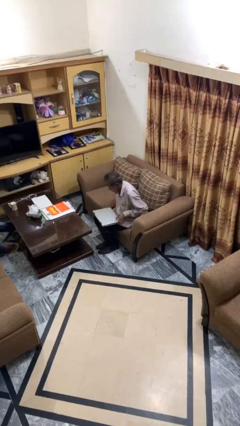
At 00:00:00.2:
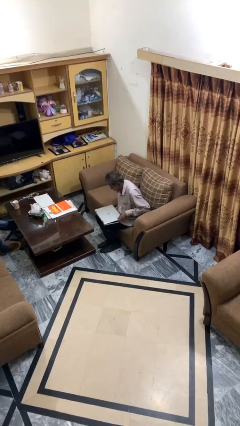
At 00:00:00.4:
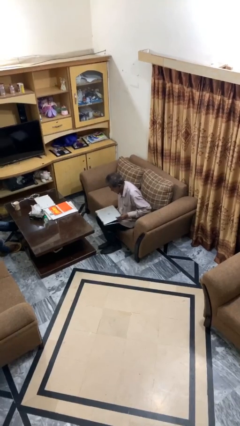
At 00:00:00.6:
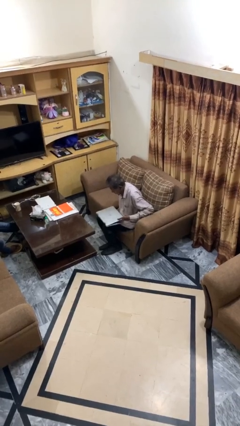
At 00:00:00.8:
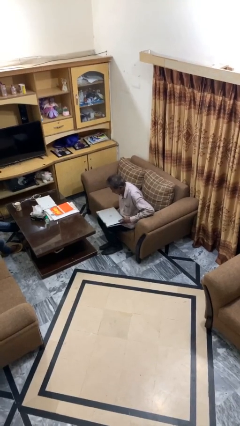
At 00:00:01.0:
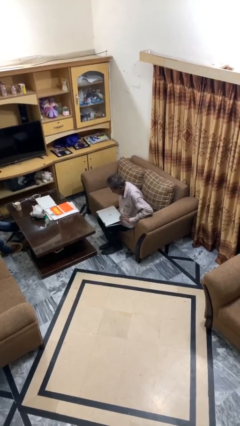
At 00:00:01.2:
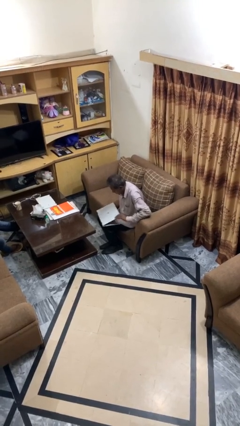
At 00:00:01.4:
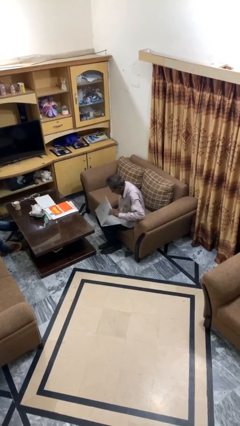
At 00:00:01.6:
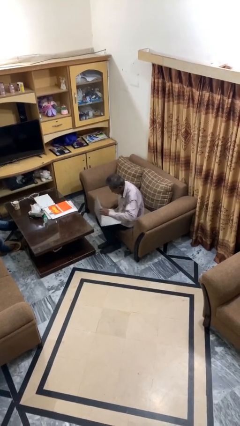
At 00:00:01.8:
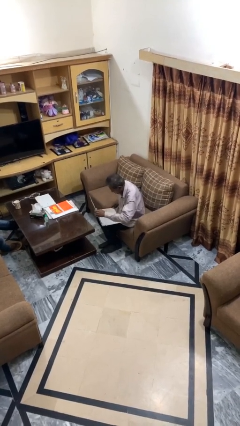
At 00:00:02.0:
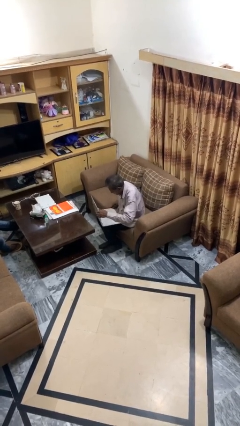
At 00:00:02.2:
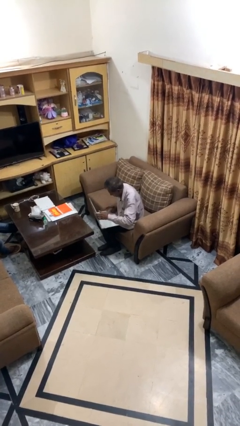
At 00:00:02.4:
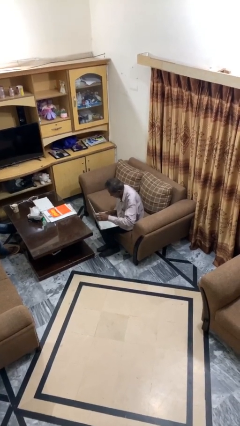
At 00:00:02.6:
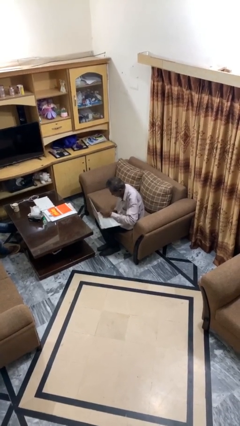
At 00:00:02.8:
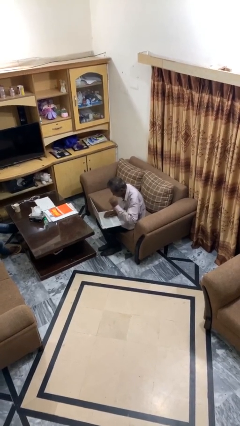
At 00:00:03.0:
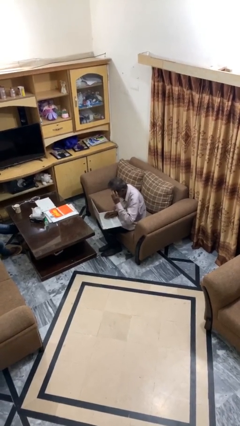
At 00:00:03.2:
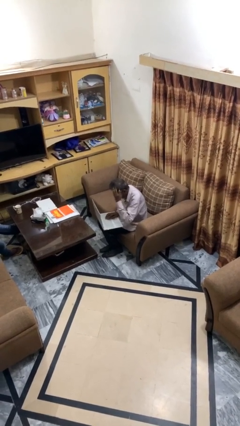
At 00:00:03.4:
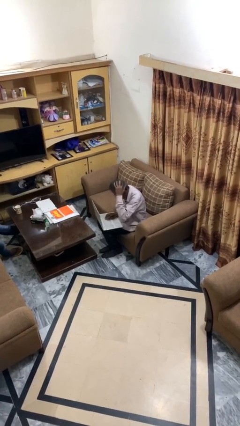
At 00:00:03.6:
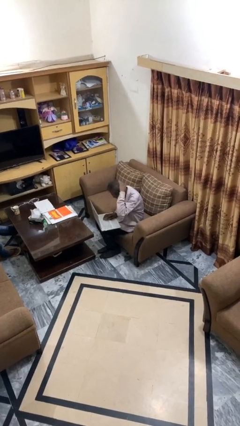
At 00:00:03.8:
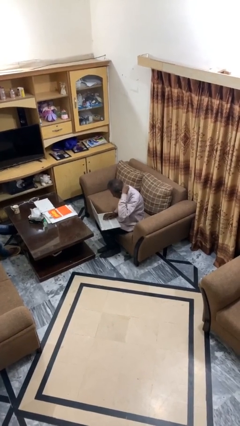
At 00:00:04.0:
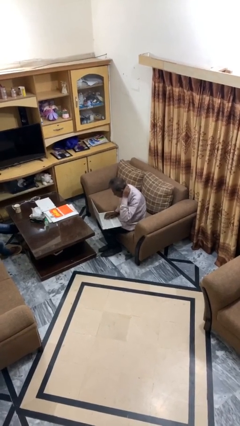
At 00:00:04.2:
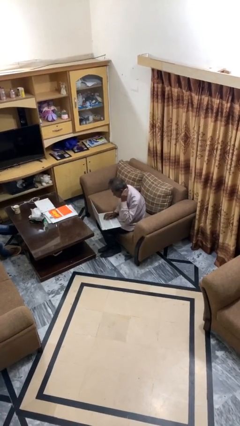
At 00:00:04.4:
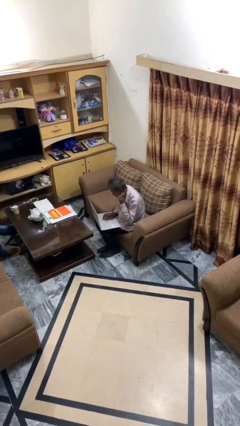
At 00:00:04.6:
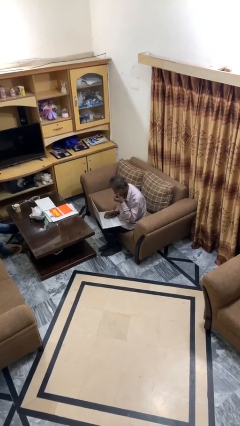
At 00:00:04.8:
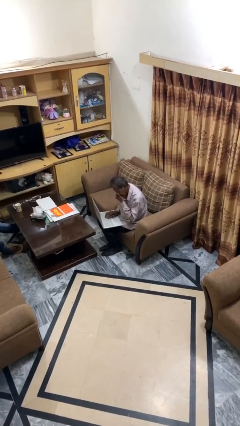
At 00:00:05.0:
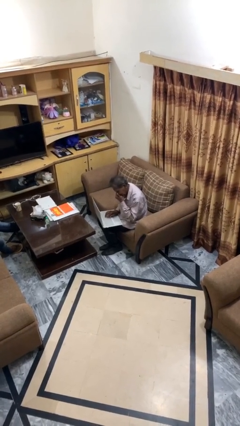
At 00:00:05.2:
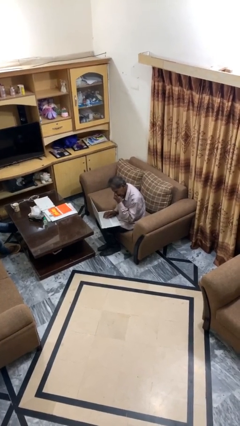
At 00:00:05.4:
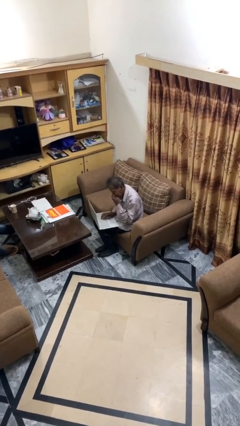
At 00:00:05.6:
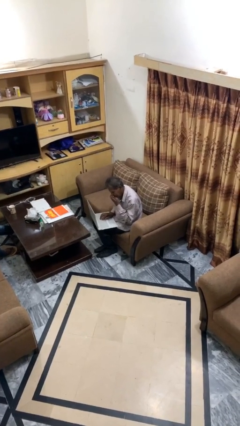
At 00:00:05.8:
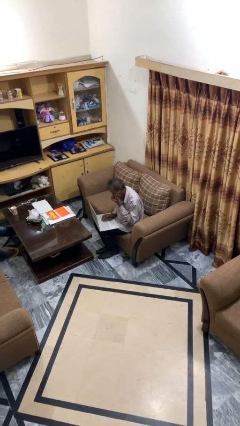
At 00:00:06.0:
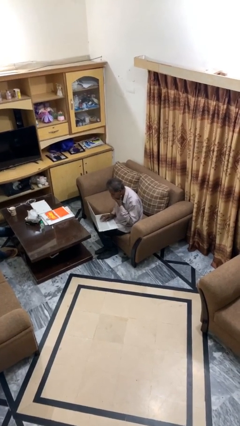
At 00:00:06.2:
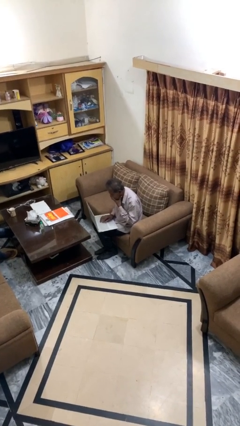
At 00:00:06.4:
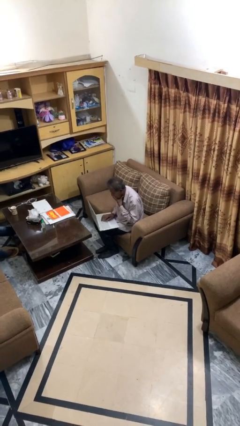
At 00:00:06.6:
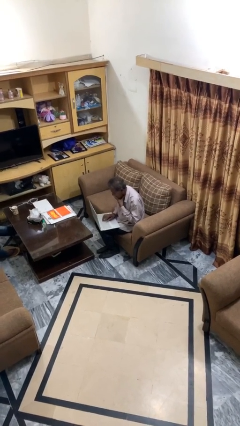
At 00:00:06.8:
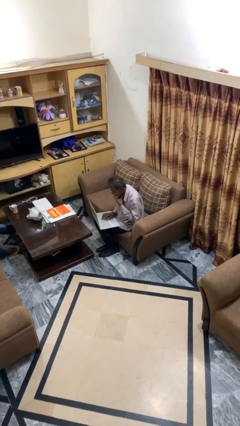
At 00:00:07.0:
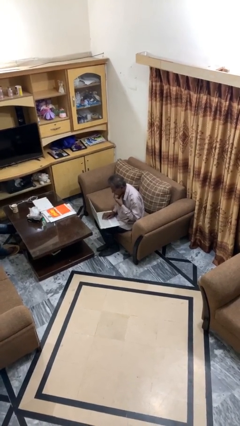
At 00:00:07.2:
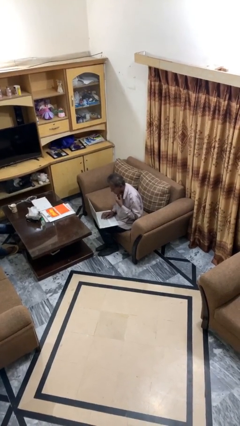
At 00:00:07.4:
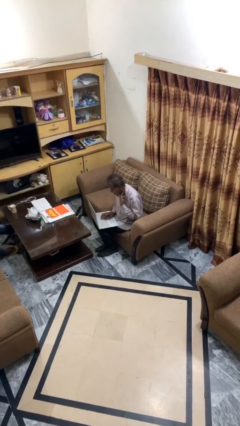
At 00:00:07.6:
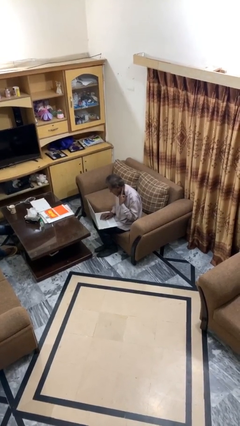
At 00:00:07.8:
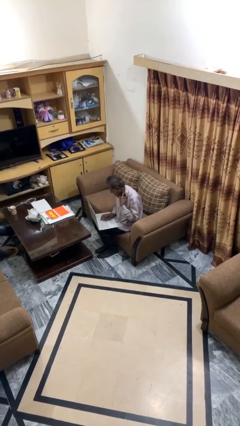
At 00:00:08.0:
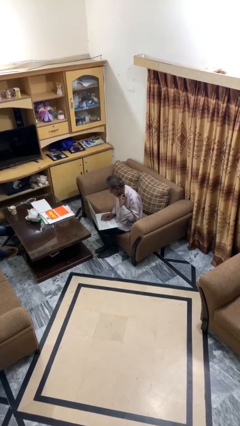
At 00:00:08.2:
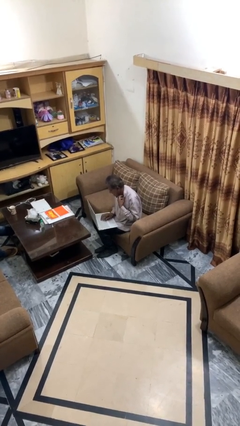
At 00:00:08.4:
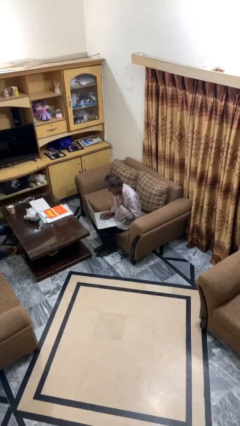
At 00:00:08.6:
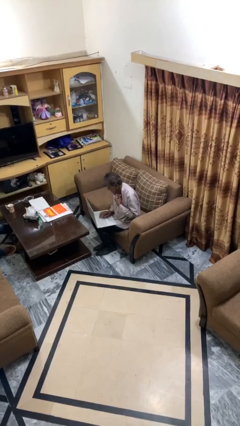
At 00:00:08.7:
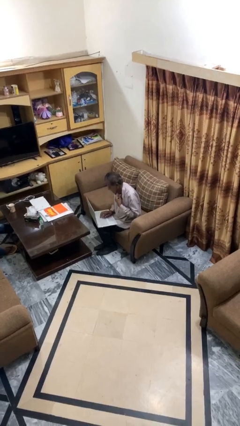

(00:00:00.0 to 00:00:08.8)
person interacts with laptop

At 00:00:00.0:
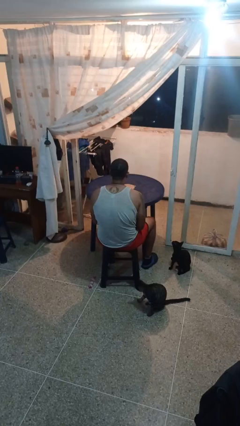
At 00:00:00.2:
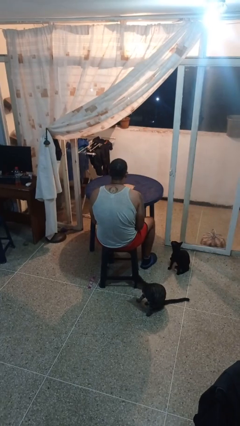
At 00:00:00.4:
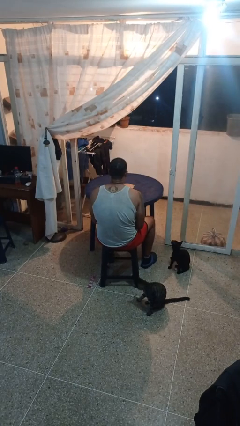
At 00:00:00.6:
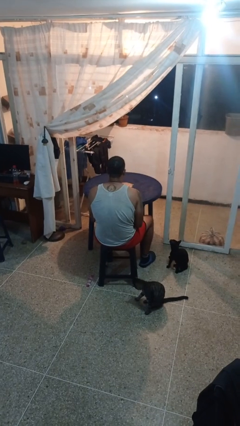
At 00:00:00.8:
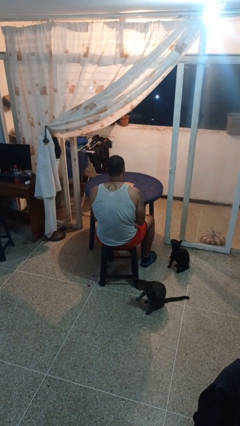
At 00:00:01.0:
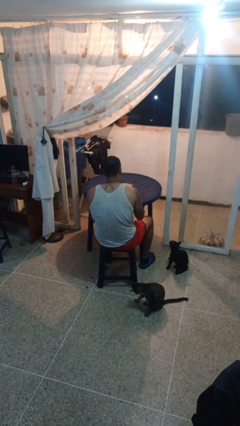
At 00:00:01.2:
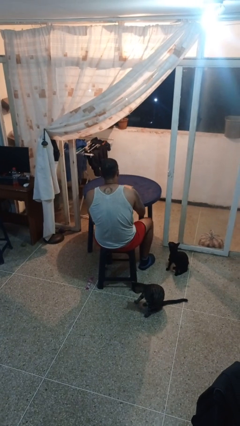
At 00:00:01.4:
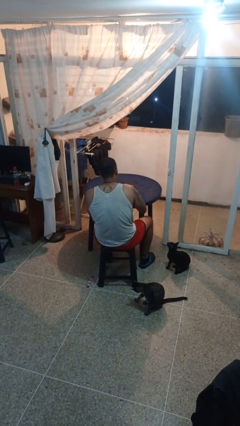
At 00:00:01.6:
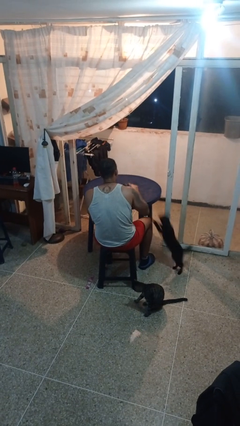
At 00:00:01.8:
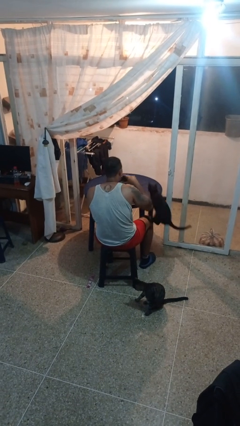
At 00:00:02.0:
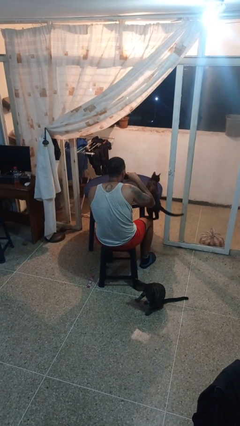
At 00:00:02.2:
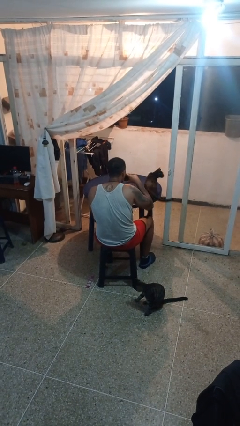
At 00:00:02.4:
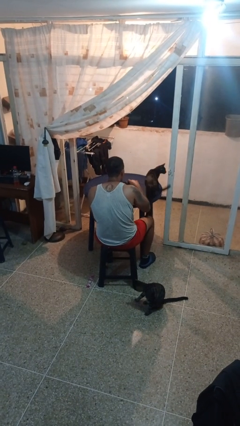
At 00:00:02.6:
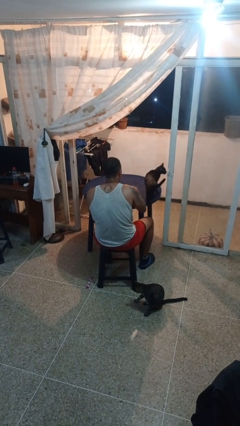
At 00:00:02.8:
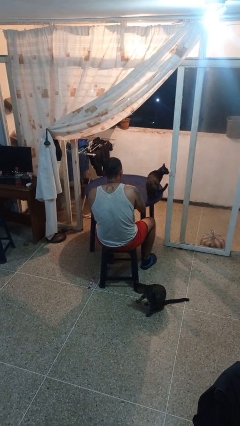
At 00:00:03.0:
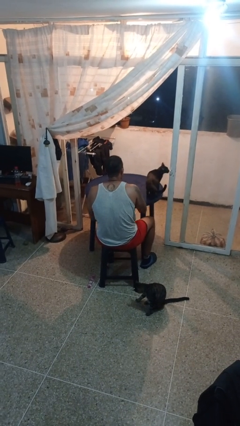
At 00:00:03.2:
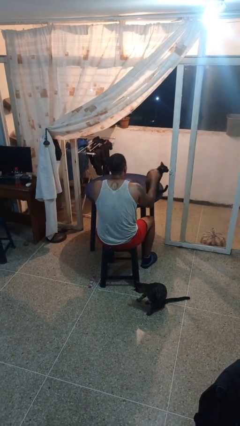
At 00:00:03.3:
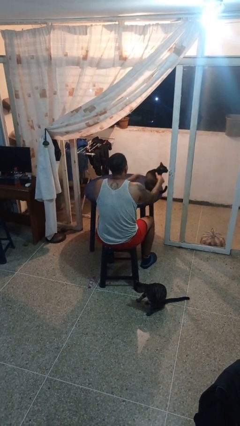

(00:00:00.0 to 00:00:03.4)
person eats with hands

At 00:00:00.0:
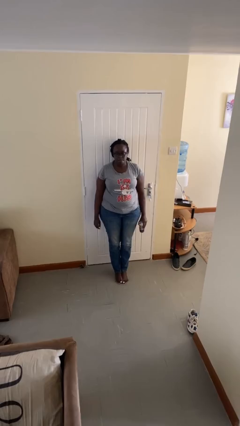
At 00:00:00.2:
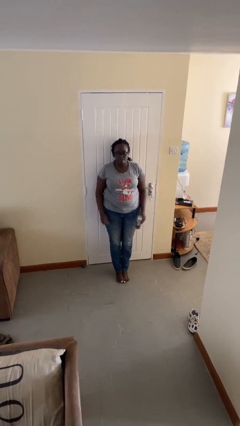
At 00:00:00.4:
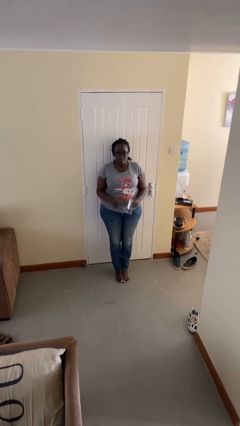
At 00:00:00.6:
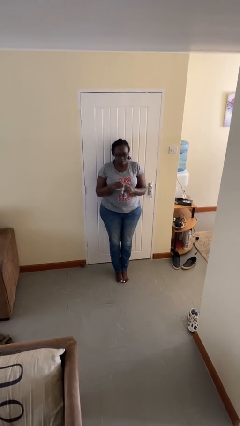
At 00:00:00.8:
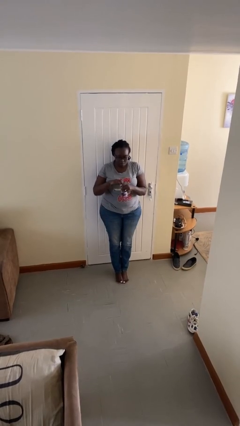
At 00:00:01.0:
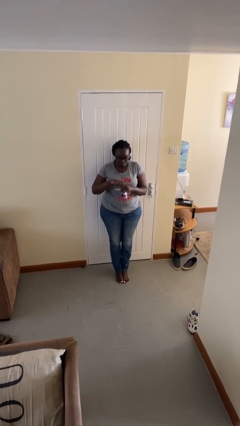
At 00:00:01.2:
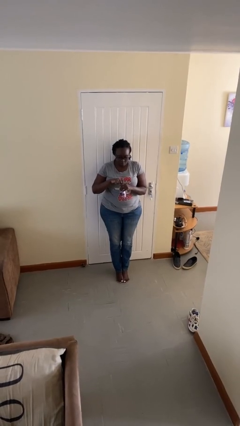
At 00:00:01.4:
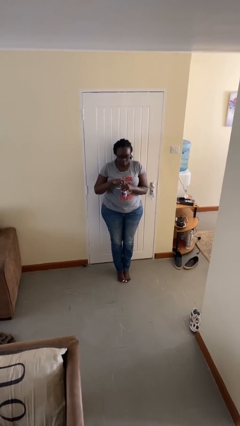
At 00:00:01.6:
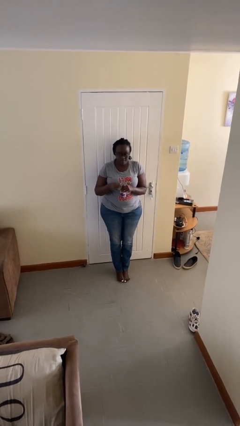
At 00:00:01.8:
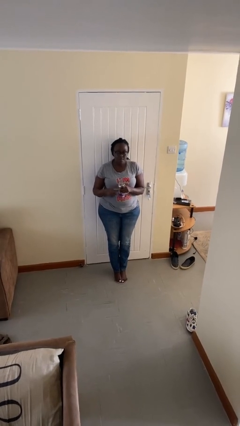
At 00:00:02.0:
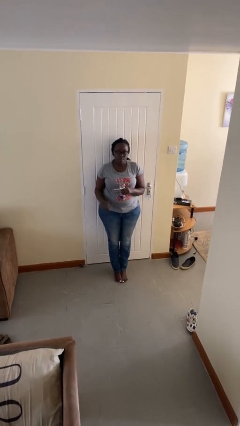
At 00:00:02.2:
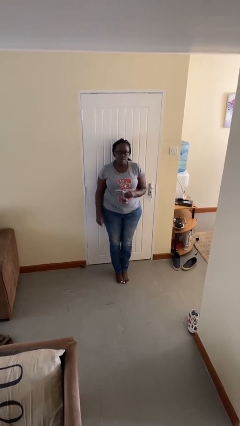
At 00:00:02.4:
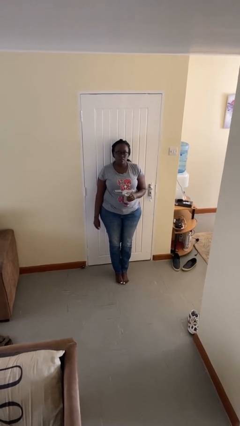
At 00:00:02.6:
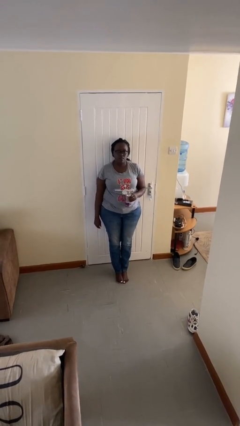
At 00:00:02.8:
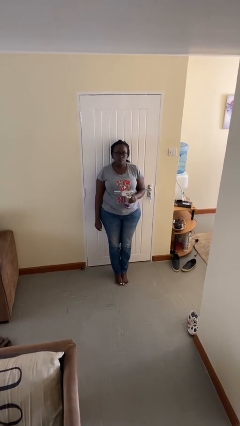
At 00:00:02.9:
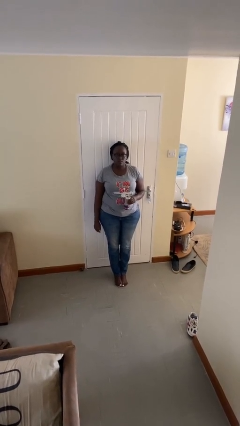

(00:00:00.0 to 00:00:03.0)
person opens beverage can

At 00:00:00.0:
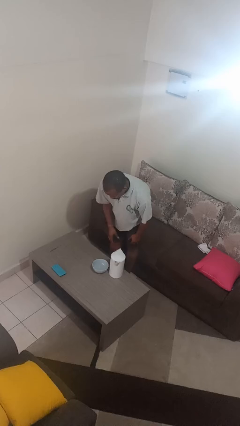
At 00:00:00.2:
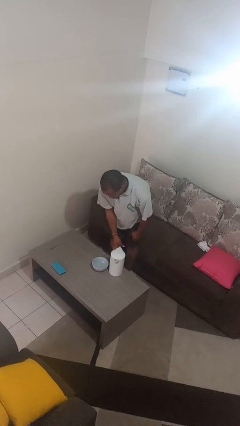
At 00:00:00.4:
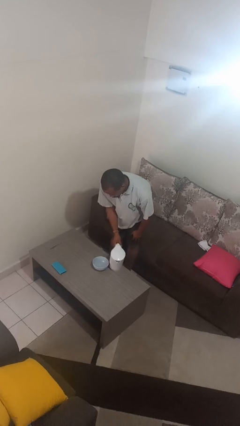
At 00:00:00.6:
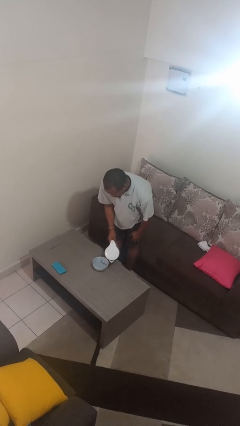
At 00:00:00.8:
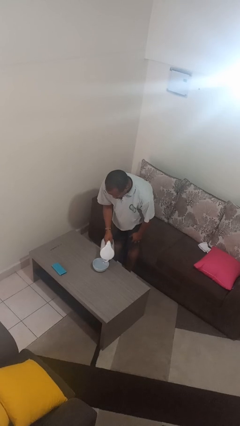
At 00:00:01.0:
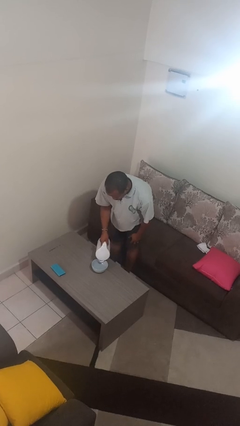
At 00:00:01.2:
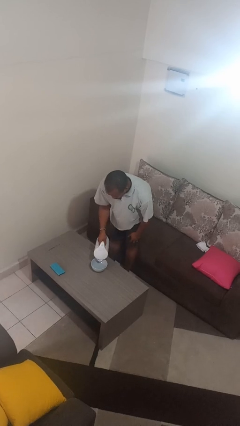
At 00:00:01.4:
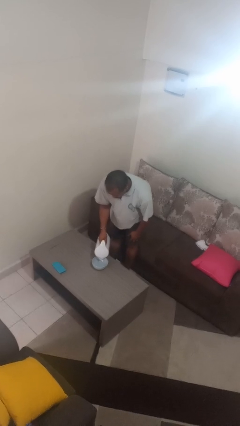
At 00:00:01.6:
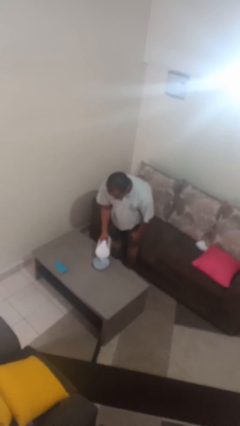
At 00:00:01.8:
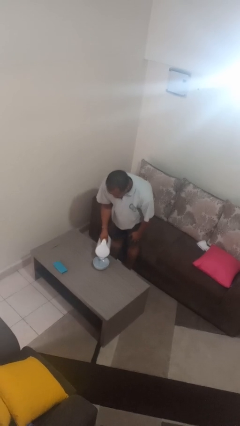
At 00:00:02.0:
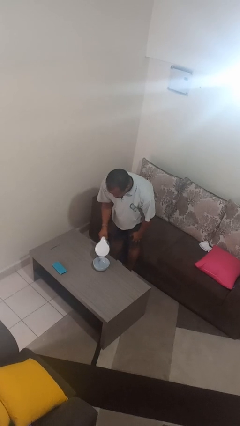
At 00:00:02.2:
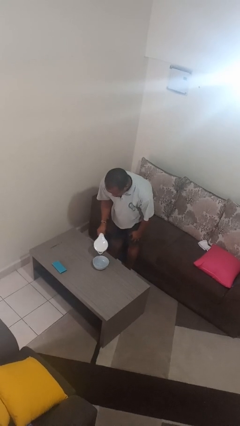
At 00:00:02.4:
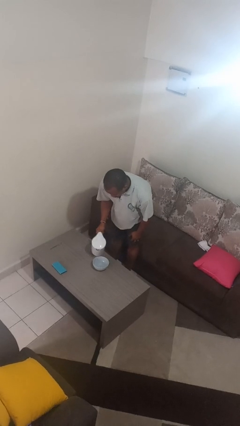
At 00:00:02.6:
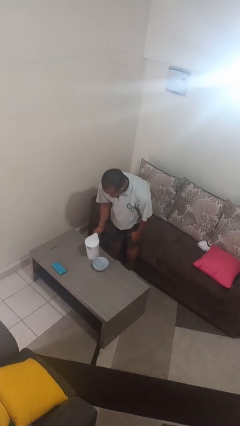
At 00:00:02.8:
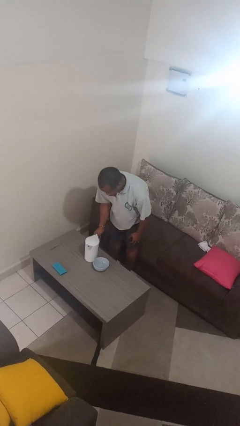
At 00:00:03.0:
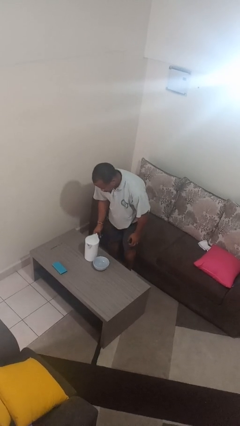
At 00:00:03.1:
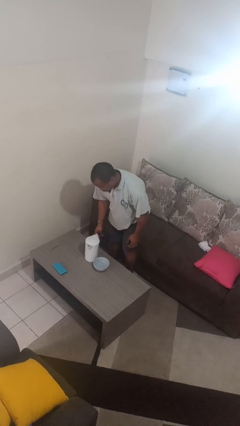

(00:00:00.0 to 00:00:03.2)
person pours into bowl
